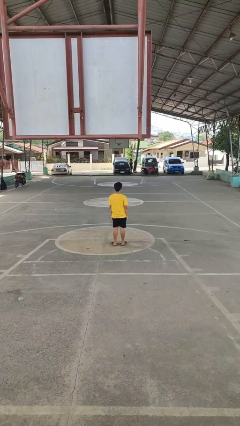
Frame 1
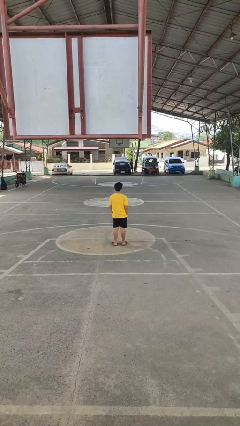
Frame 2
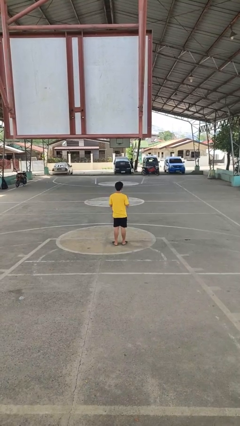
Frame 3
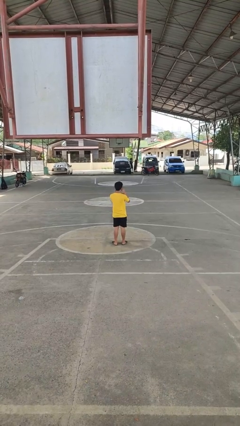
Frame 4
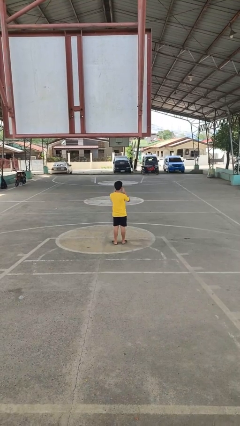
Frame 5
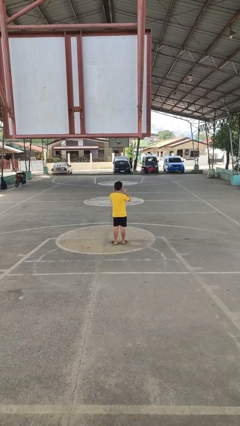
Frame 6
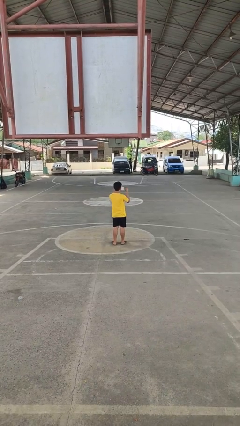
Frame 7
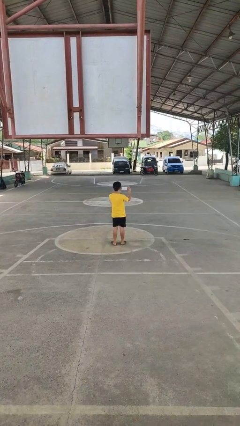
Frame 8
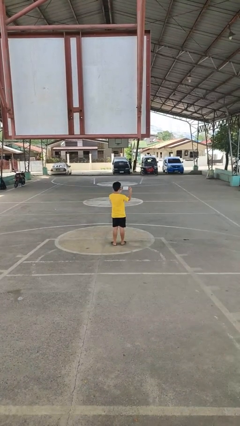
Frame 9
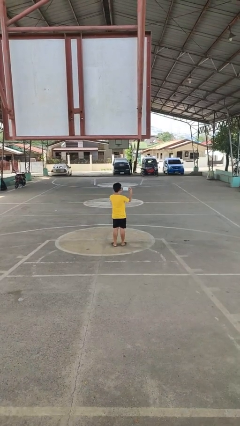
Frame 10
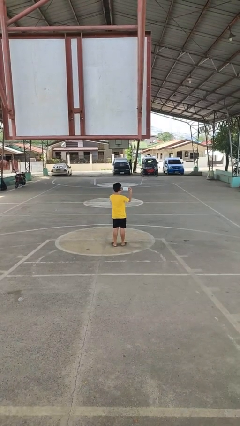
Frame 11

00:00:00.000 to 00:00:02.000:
person takes off facemask

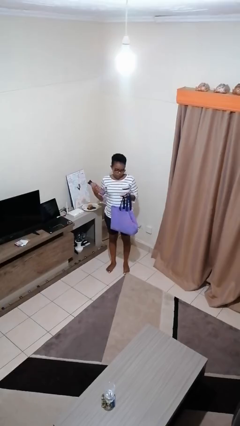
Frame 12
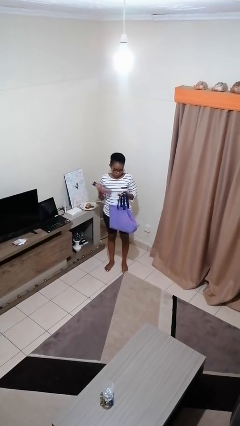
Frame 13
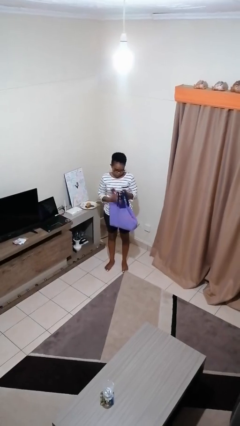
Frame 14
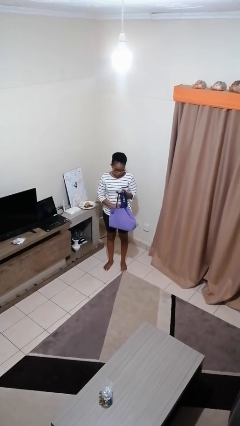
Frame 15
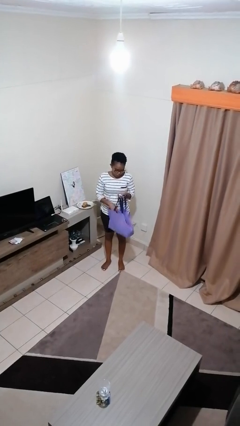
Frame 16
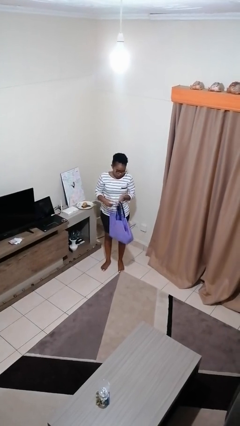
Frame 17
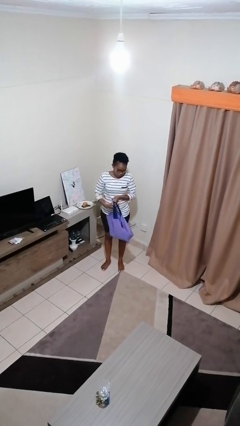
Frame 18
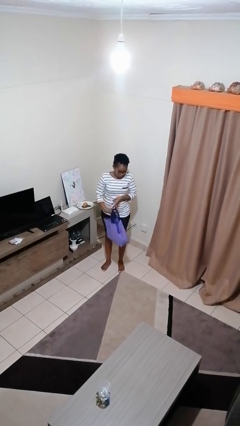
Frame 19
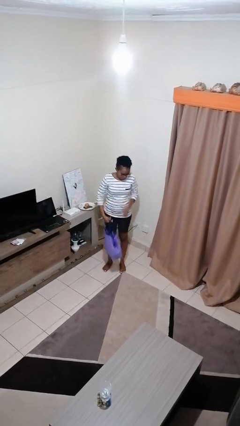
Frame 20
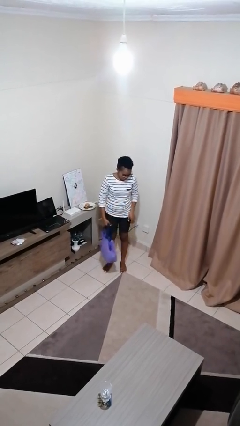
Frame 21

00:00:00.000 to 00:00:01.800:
person puts object into bag

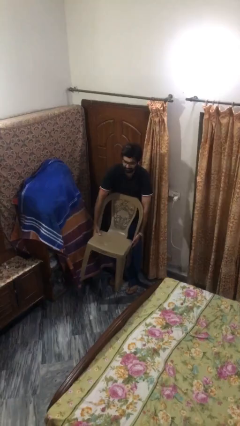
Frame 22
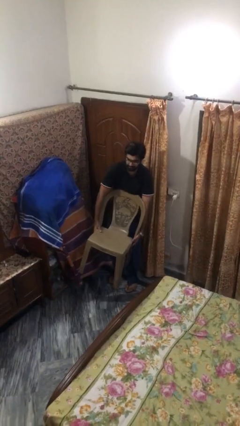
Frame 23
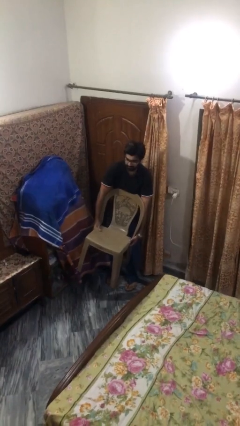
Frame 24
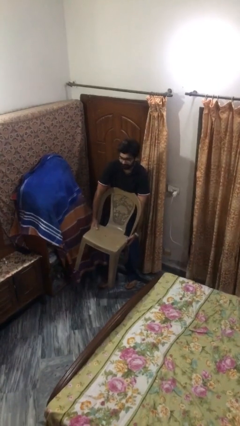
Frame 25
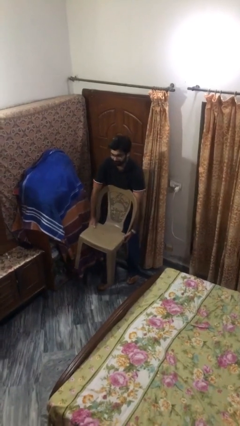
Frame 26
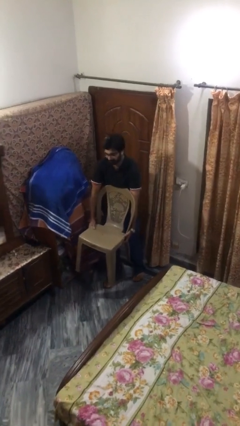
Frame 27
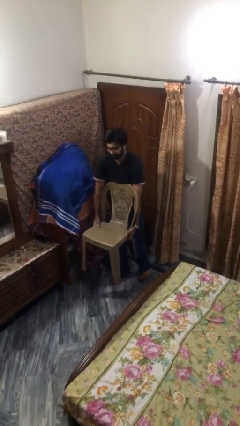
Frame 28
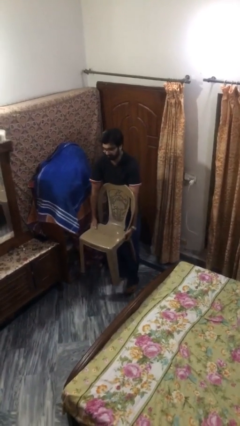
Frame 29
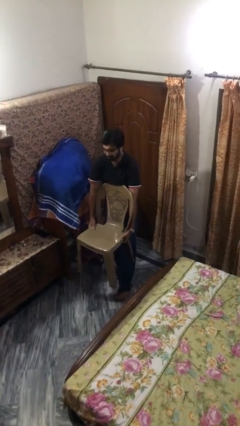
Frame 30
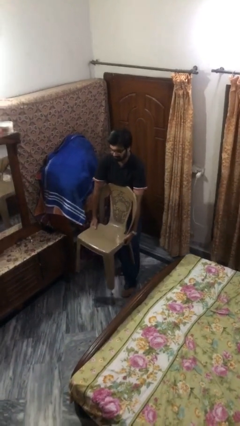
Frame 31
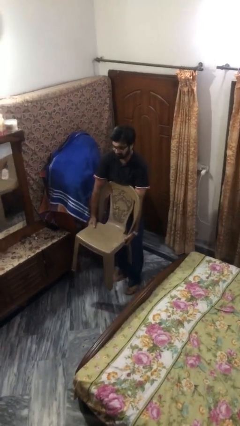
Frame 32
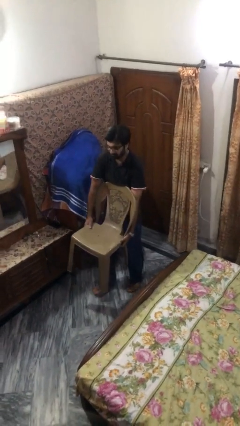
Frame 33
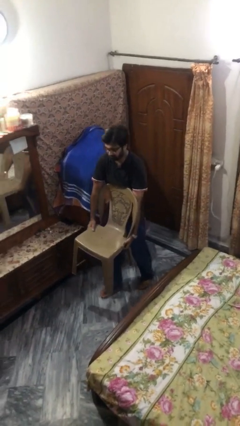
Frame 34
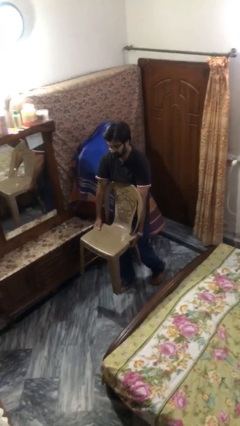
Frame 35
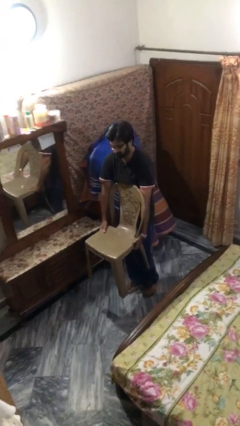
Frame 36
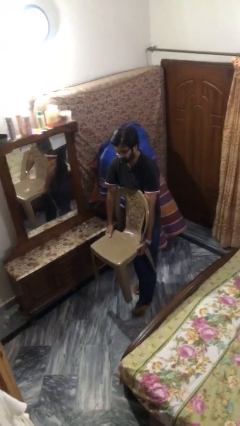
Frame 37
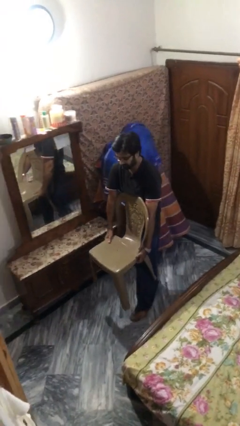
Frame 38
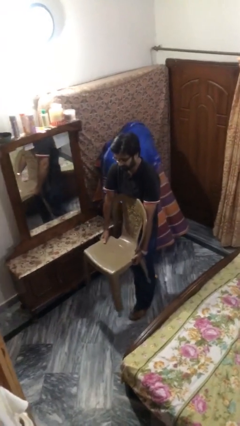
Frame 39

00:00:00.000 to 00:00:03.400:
person carries heavy object

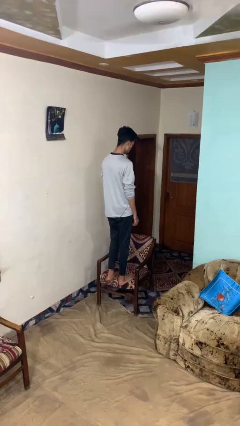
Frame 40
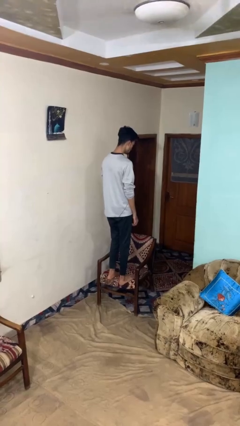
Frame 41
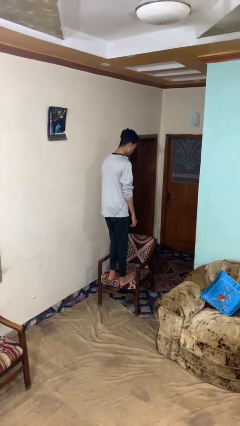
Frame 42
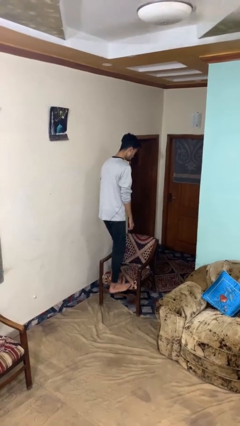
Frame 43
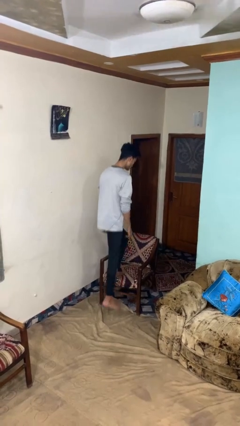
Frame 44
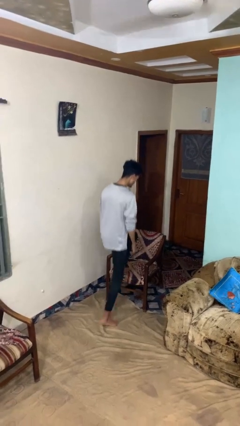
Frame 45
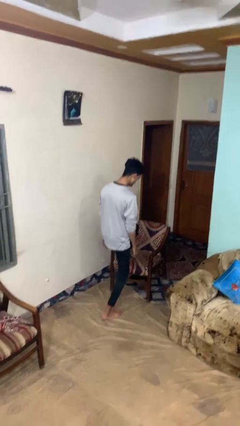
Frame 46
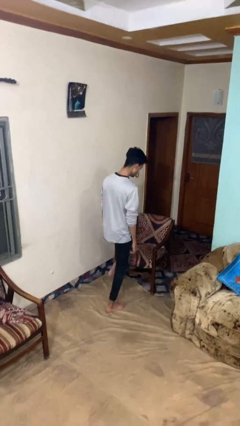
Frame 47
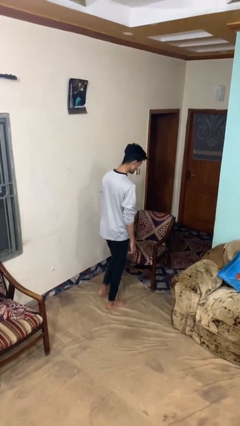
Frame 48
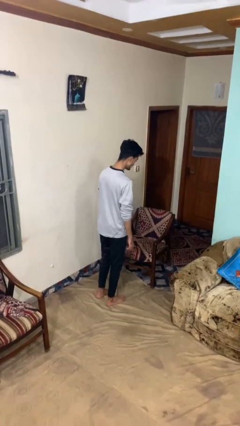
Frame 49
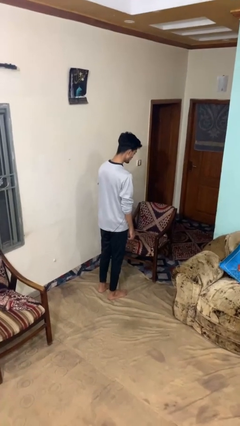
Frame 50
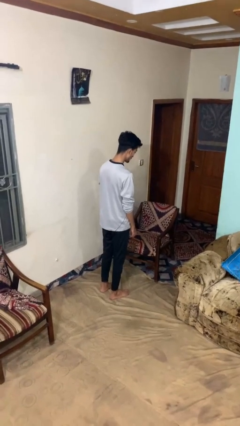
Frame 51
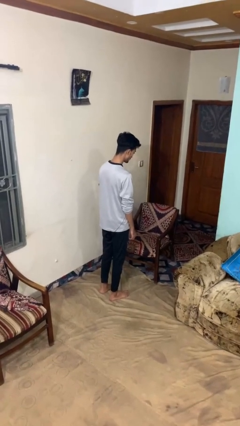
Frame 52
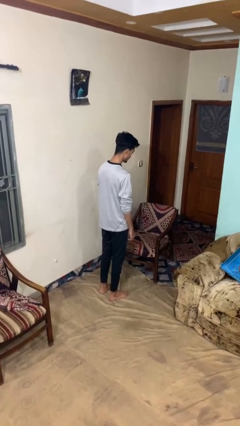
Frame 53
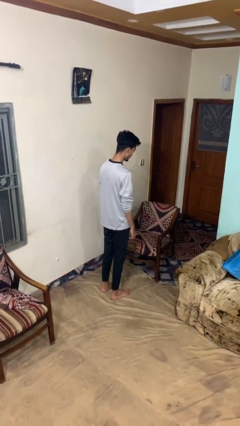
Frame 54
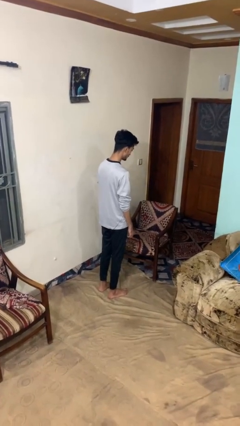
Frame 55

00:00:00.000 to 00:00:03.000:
person climbs off chair

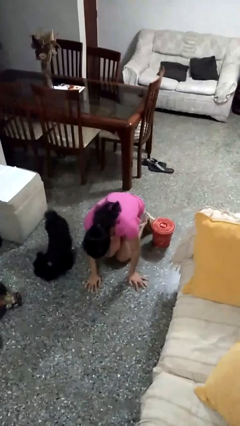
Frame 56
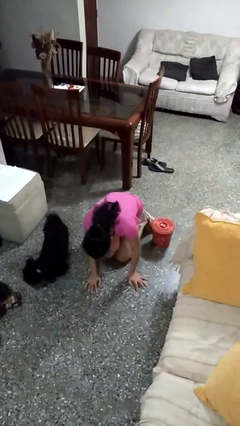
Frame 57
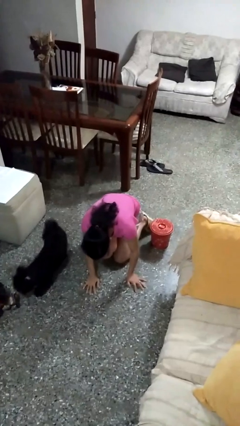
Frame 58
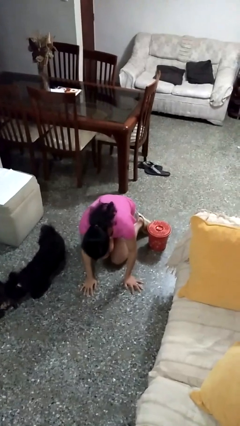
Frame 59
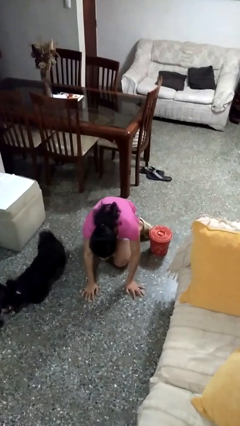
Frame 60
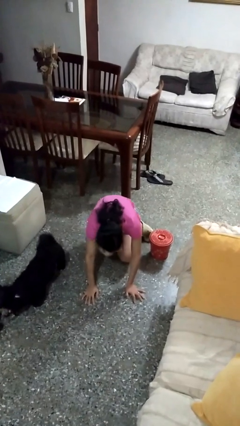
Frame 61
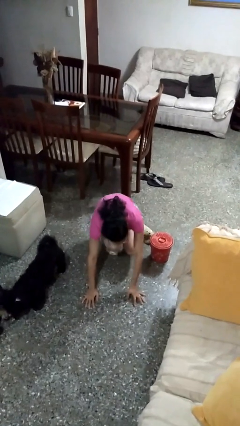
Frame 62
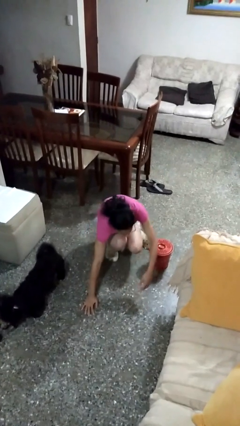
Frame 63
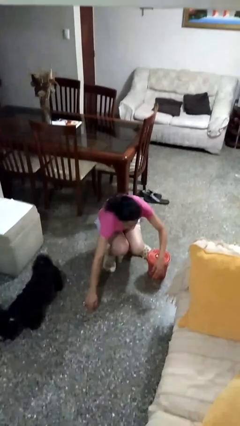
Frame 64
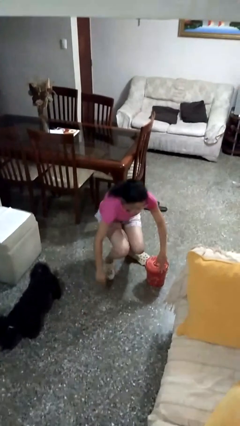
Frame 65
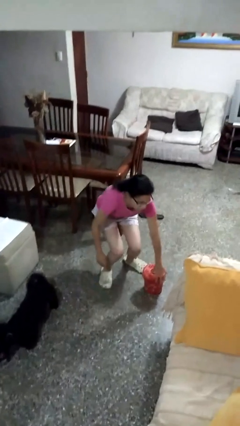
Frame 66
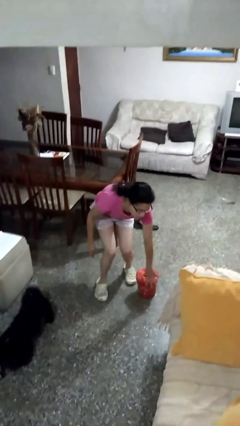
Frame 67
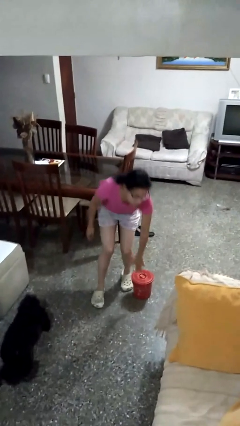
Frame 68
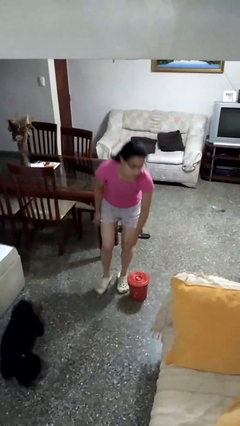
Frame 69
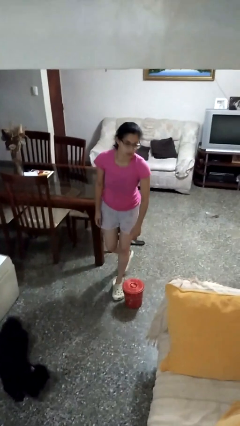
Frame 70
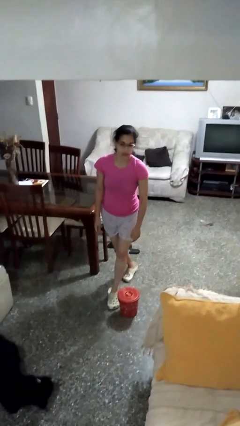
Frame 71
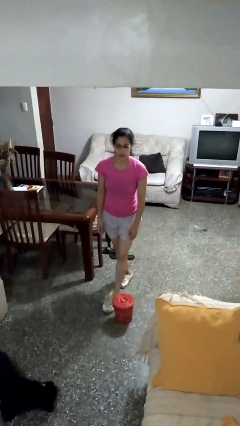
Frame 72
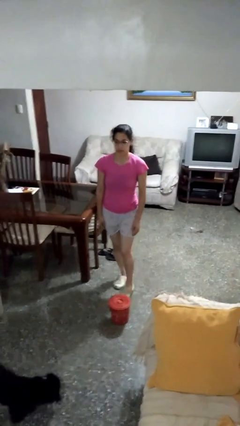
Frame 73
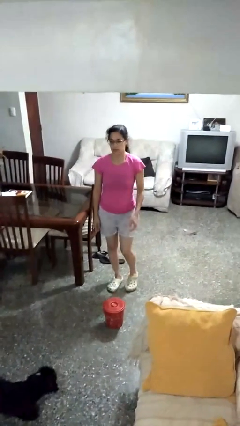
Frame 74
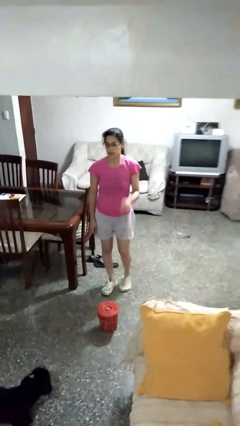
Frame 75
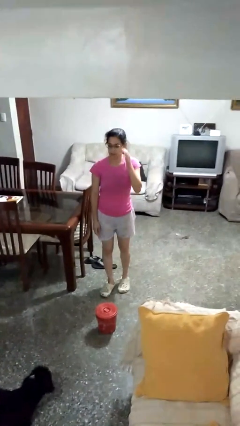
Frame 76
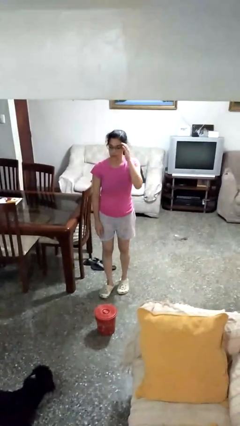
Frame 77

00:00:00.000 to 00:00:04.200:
person stands up from floor

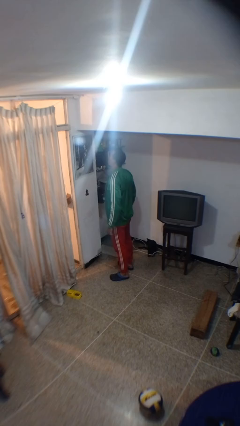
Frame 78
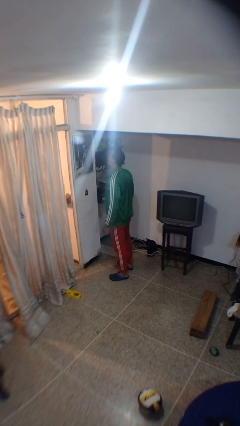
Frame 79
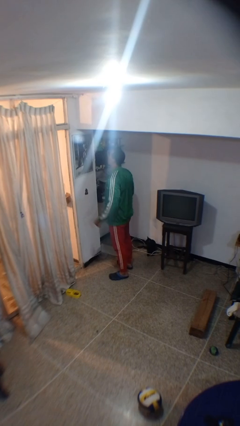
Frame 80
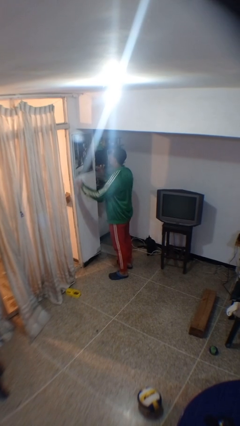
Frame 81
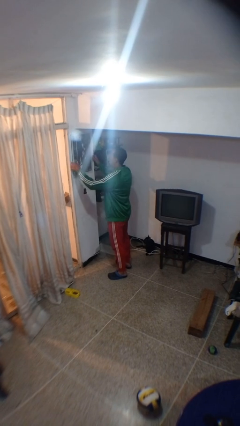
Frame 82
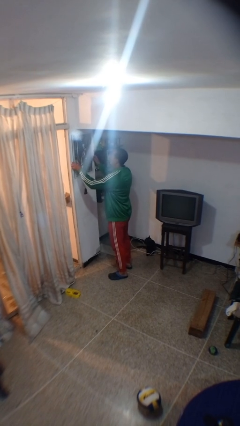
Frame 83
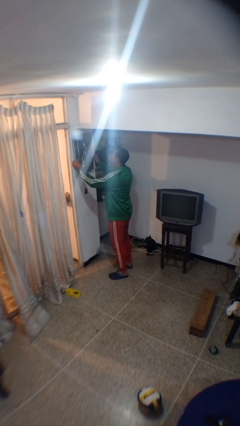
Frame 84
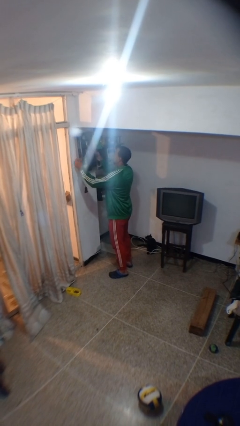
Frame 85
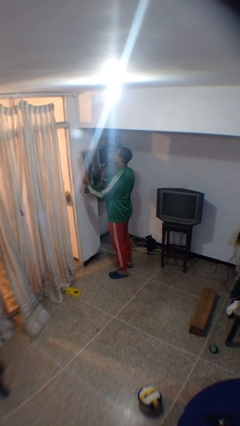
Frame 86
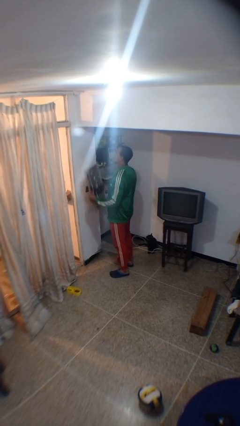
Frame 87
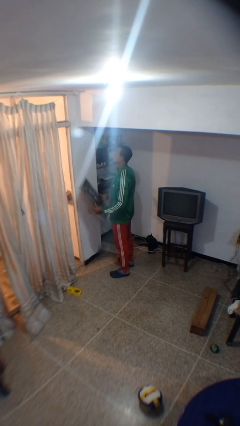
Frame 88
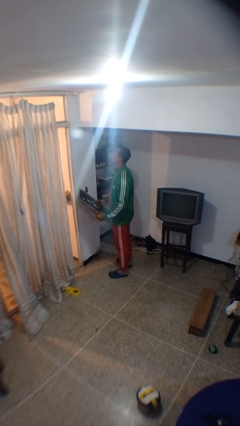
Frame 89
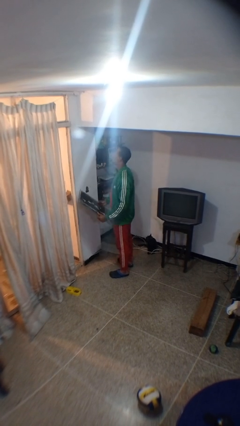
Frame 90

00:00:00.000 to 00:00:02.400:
person takes down picture frame

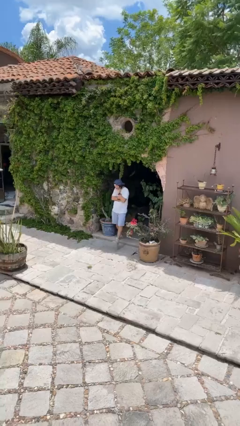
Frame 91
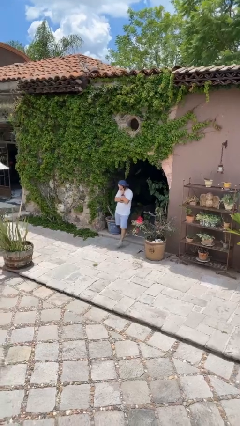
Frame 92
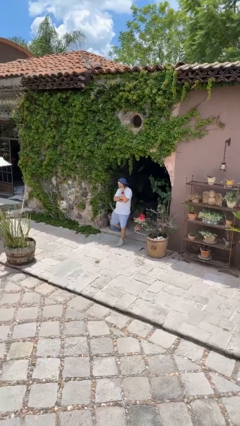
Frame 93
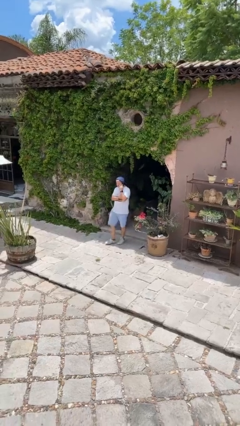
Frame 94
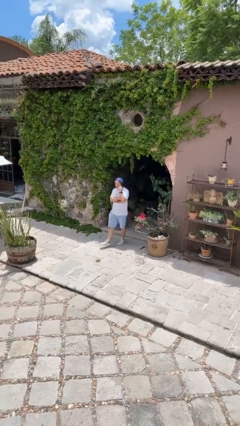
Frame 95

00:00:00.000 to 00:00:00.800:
person enters scene through structure
